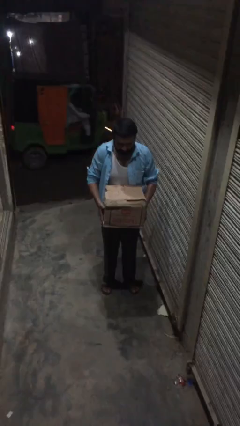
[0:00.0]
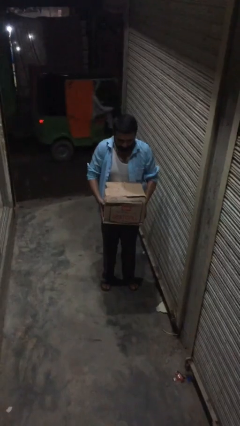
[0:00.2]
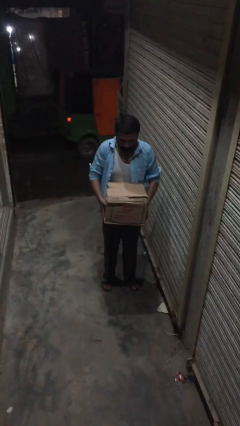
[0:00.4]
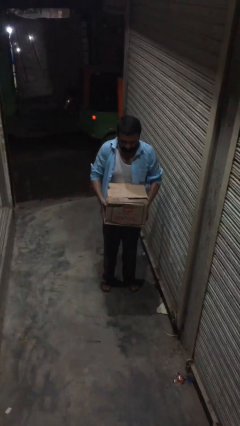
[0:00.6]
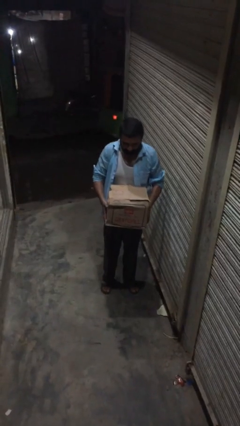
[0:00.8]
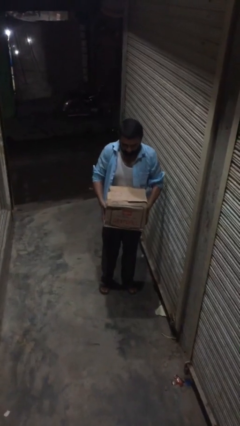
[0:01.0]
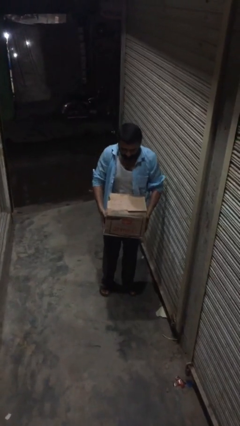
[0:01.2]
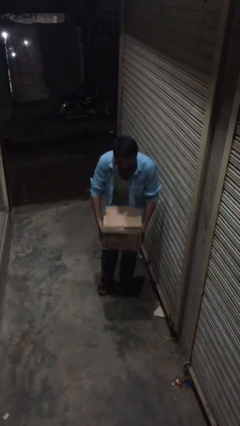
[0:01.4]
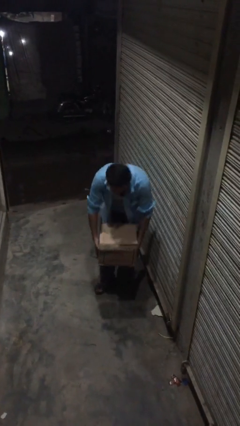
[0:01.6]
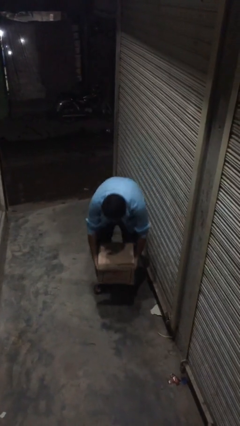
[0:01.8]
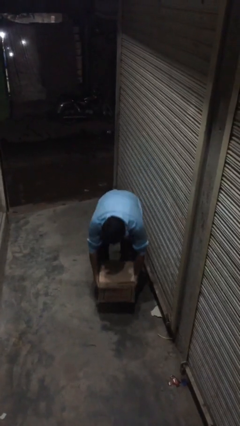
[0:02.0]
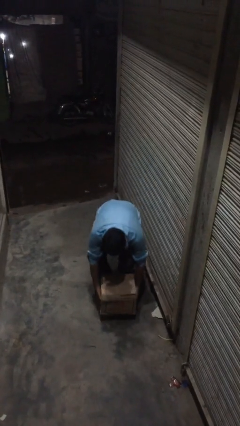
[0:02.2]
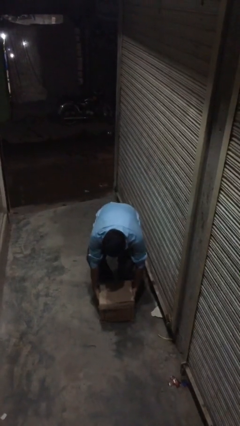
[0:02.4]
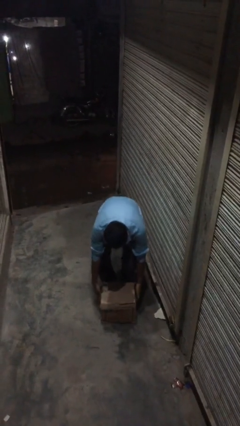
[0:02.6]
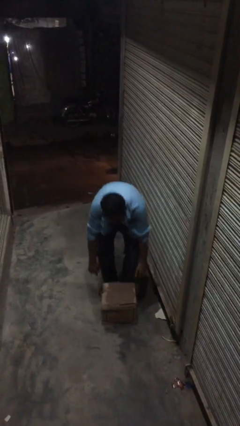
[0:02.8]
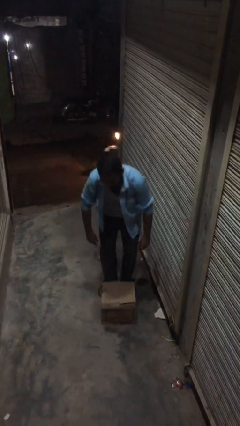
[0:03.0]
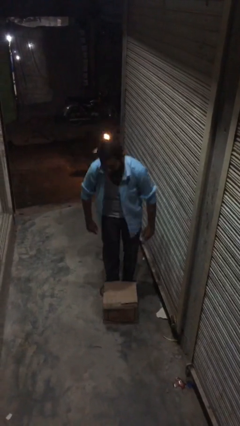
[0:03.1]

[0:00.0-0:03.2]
person puts down object on floor

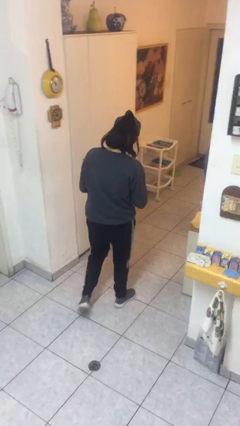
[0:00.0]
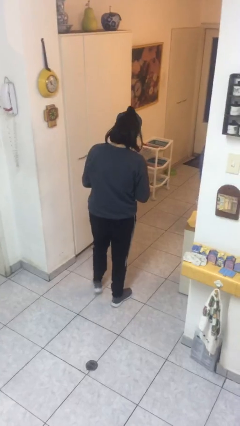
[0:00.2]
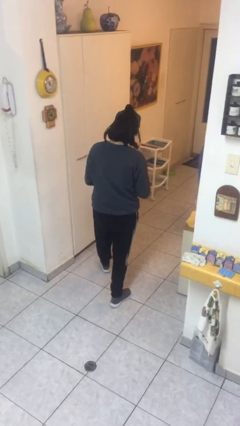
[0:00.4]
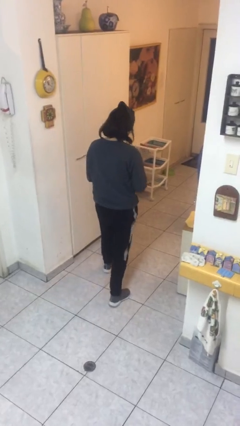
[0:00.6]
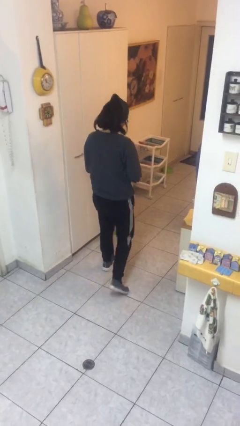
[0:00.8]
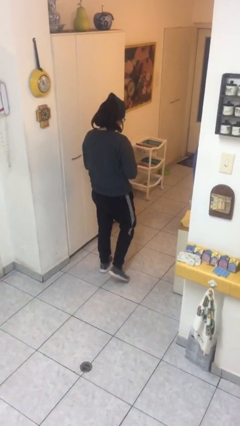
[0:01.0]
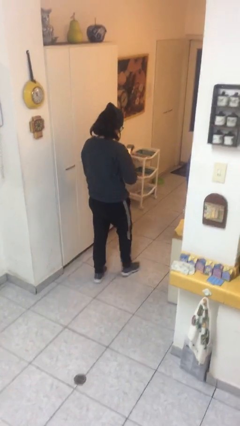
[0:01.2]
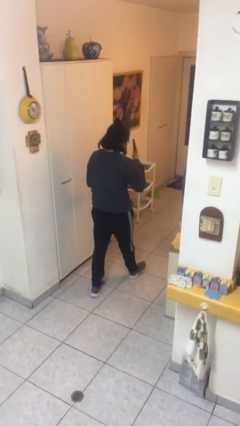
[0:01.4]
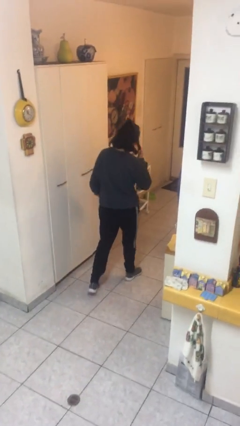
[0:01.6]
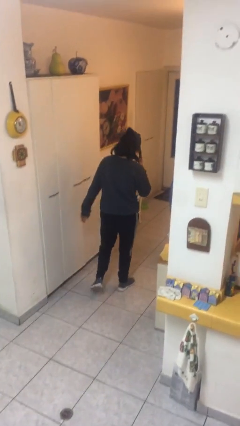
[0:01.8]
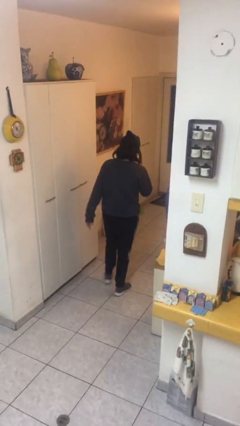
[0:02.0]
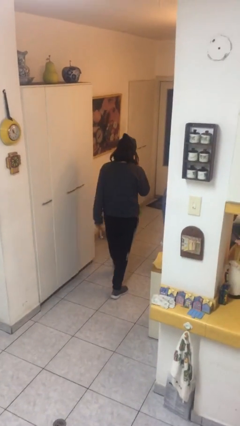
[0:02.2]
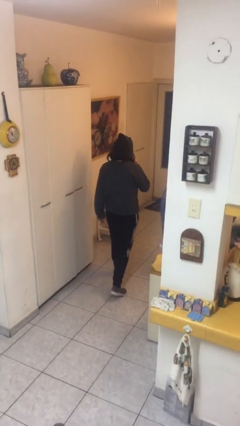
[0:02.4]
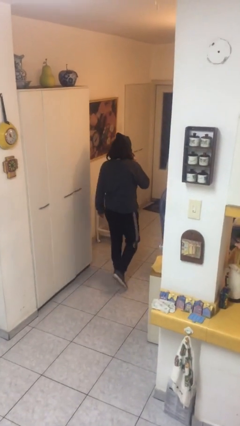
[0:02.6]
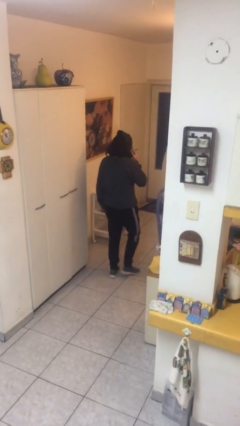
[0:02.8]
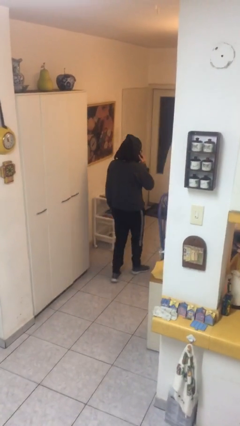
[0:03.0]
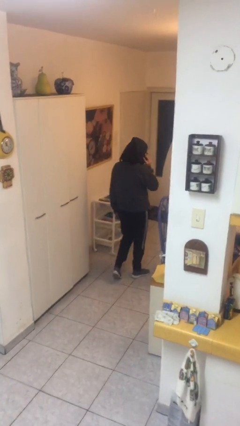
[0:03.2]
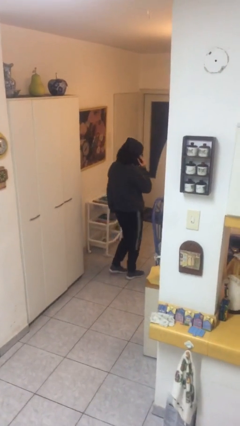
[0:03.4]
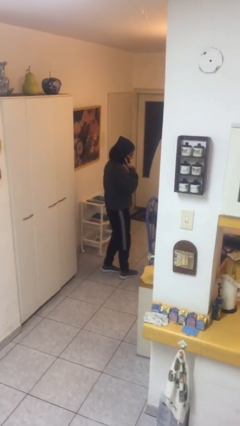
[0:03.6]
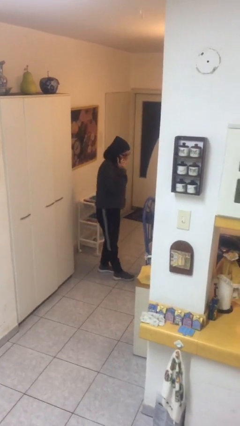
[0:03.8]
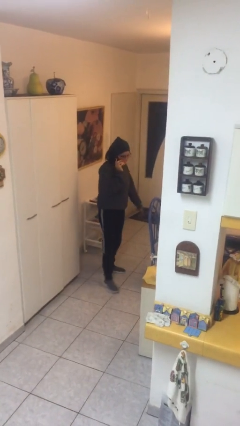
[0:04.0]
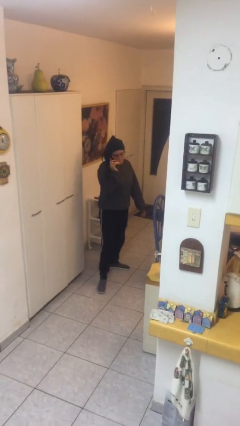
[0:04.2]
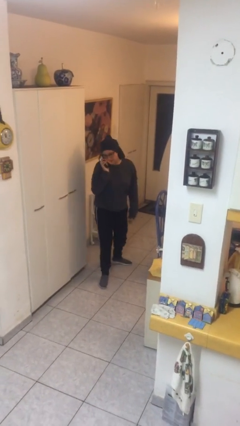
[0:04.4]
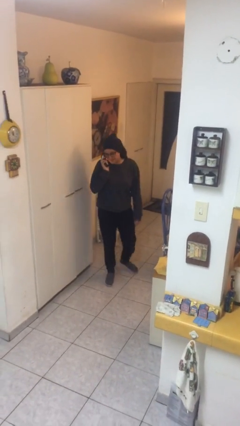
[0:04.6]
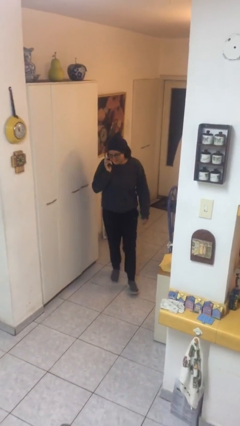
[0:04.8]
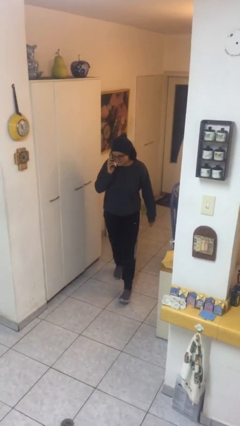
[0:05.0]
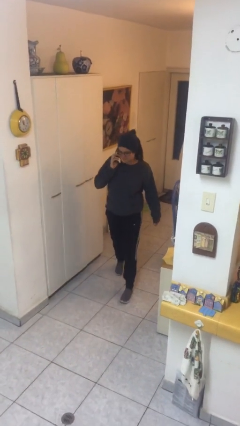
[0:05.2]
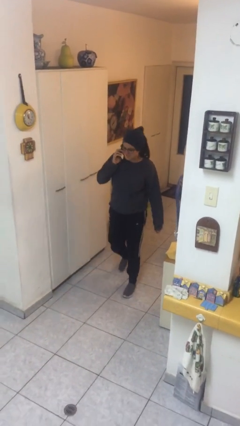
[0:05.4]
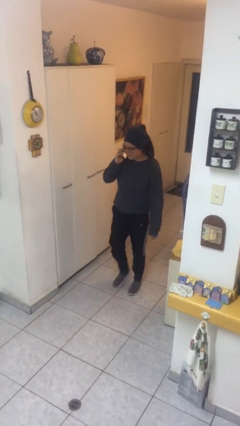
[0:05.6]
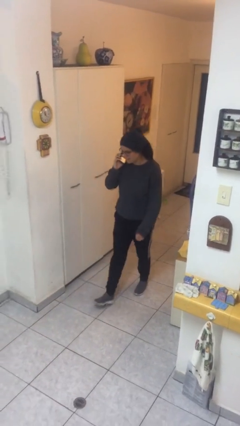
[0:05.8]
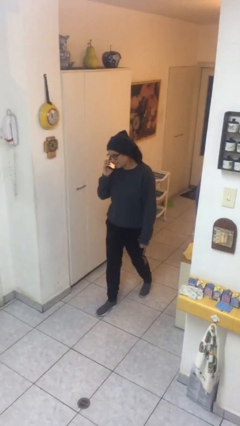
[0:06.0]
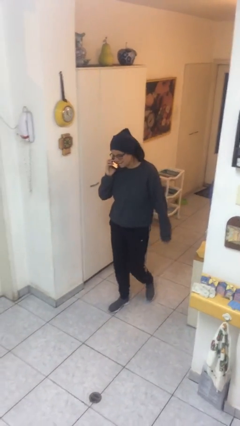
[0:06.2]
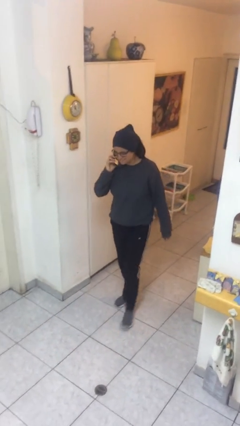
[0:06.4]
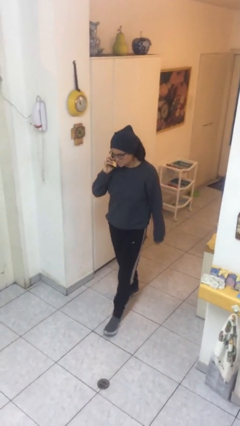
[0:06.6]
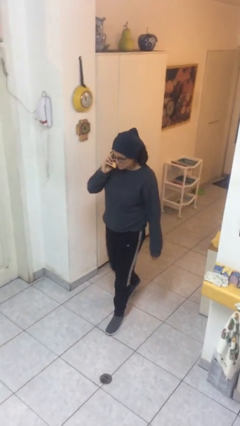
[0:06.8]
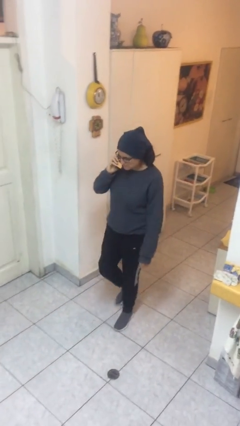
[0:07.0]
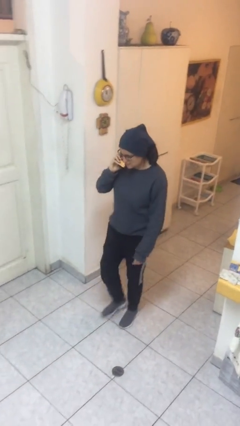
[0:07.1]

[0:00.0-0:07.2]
person talks on phone

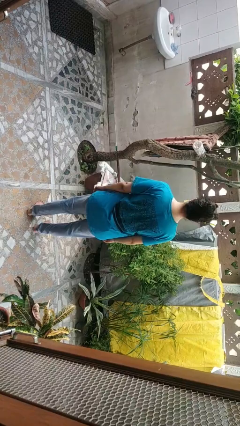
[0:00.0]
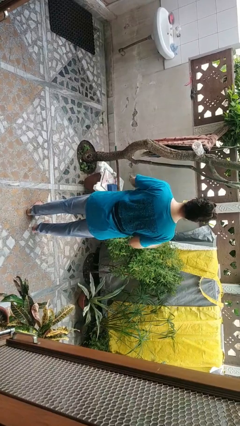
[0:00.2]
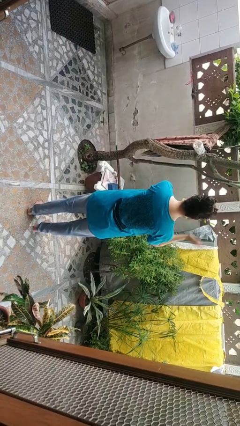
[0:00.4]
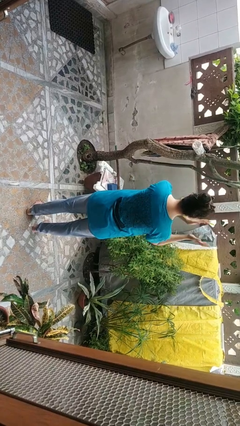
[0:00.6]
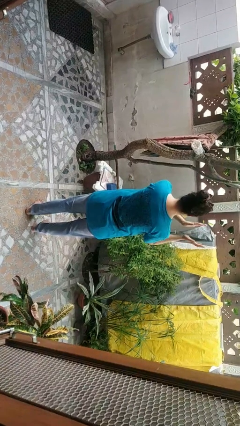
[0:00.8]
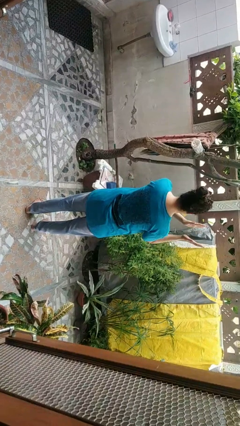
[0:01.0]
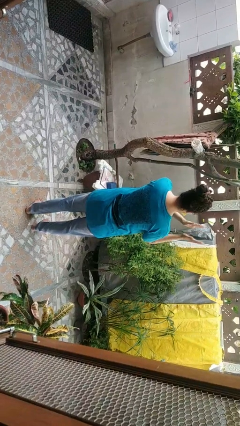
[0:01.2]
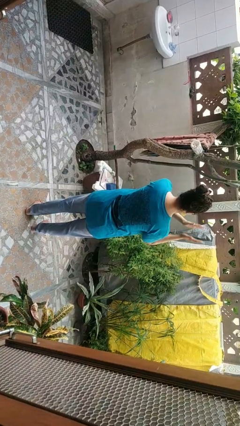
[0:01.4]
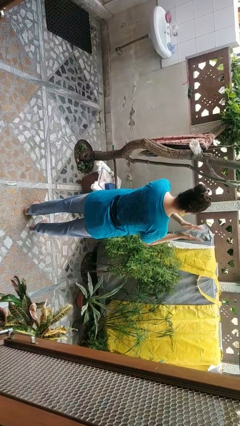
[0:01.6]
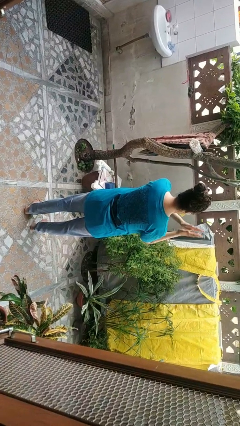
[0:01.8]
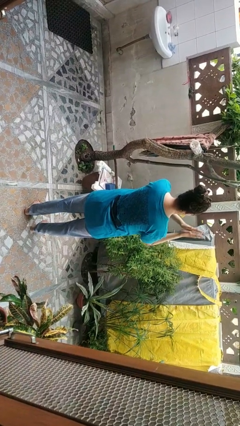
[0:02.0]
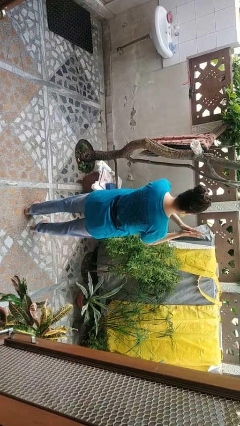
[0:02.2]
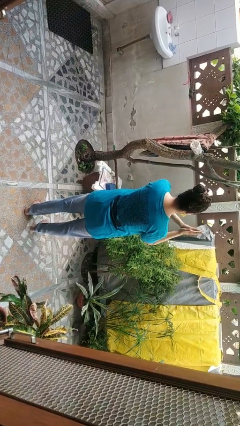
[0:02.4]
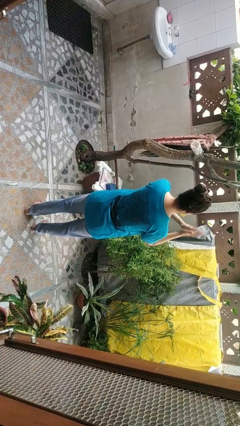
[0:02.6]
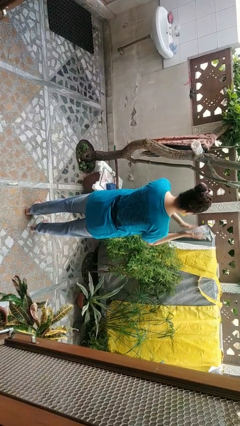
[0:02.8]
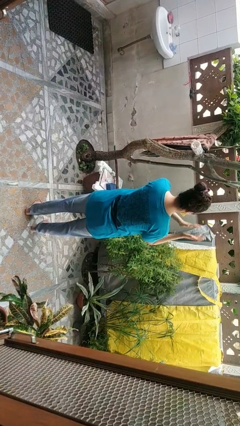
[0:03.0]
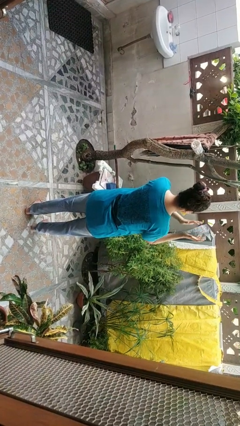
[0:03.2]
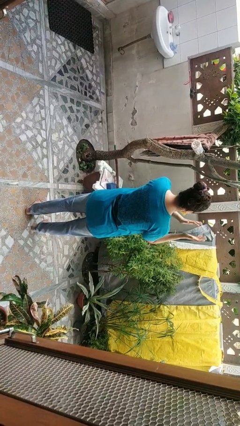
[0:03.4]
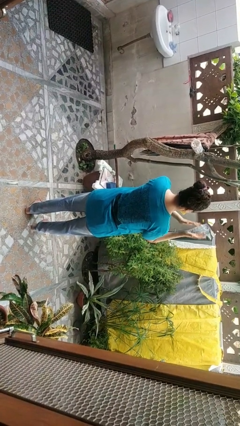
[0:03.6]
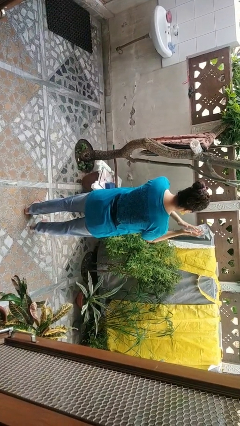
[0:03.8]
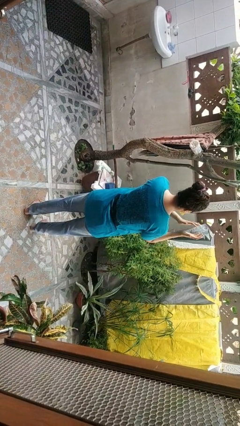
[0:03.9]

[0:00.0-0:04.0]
person claps hands

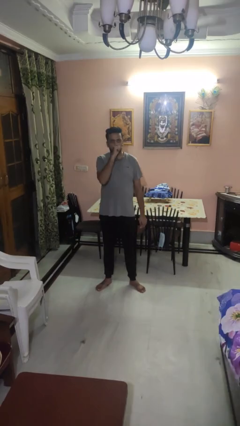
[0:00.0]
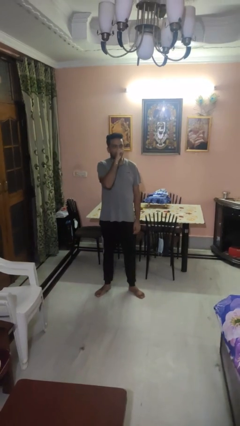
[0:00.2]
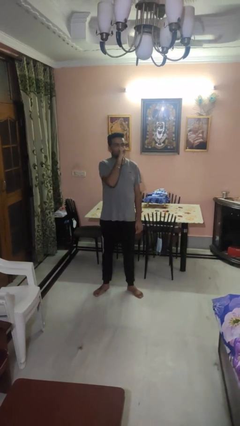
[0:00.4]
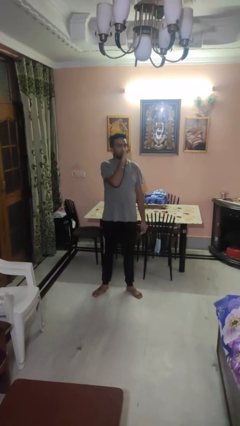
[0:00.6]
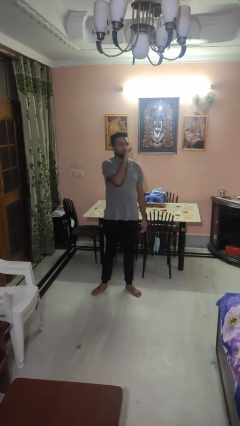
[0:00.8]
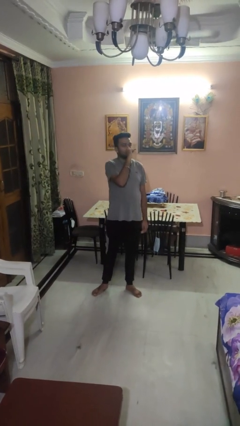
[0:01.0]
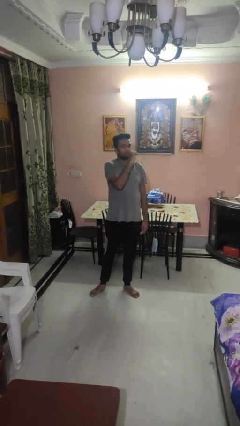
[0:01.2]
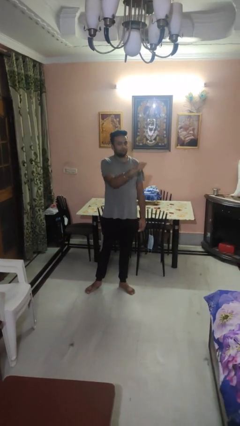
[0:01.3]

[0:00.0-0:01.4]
person vapes

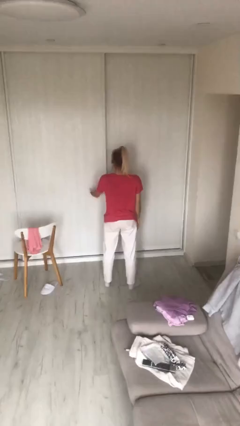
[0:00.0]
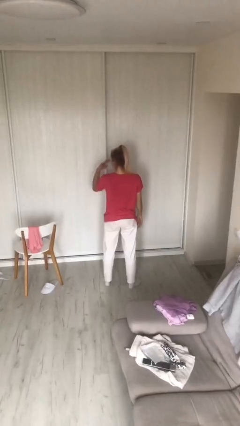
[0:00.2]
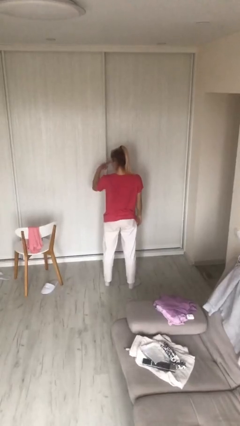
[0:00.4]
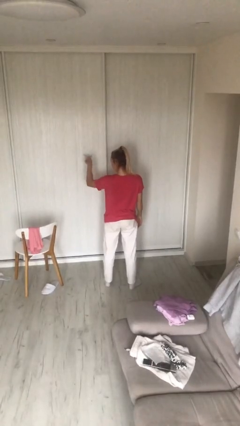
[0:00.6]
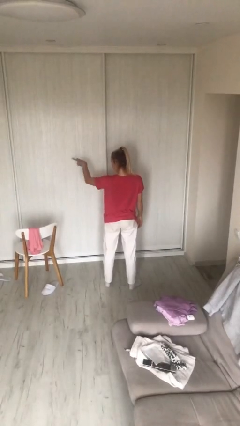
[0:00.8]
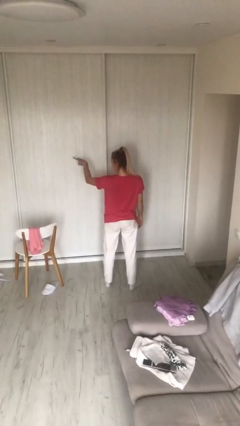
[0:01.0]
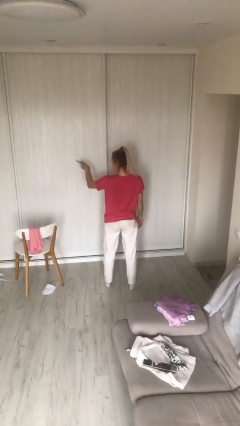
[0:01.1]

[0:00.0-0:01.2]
person gestures watch closely

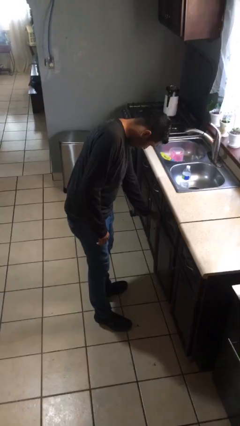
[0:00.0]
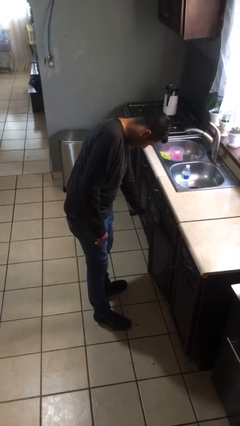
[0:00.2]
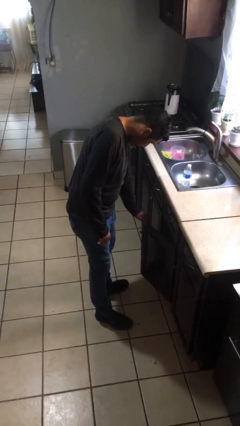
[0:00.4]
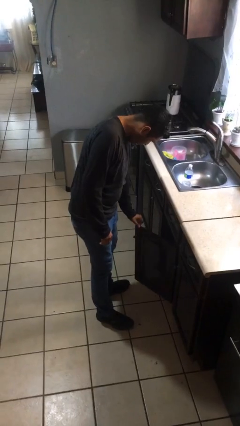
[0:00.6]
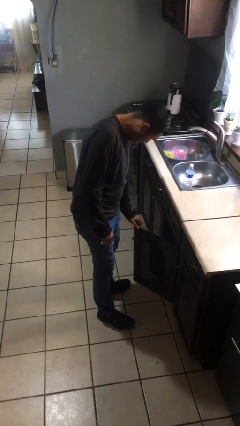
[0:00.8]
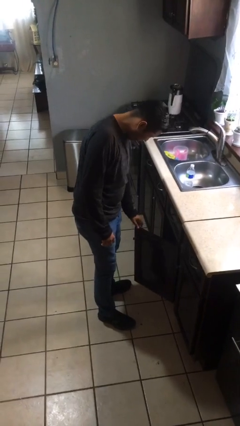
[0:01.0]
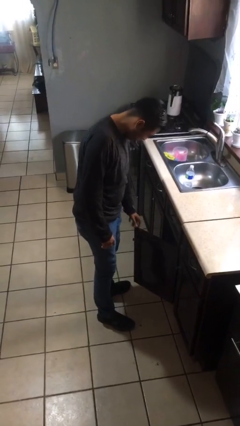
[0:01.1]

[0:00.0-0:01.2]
person opens cabinet
